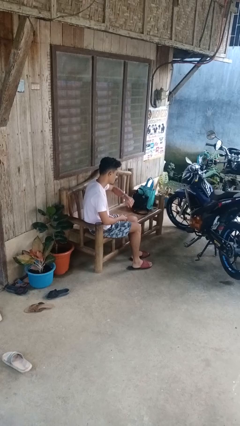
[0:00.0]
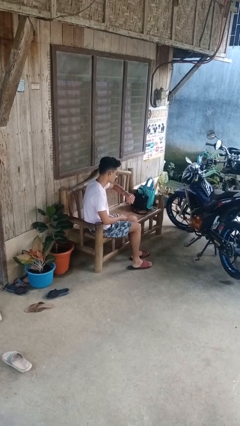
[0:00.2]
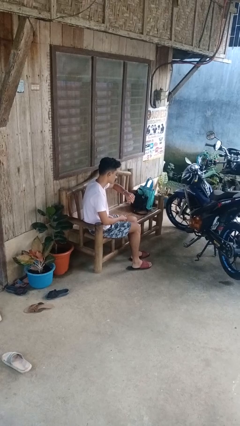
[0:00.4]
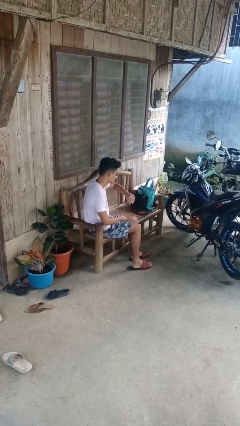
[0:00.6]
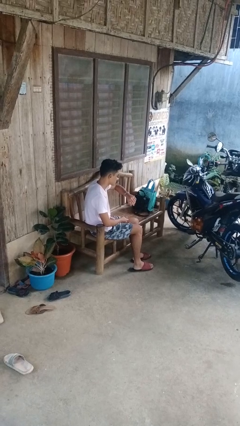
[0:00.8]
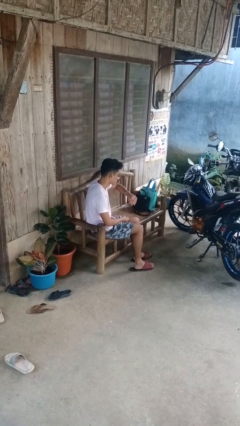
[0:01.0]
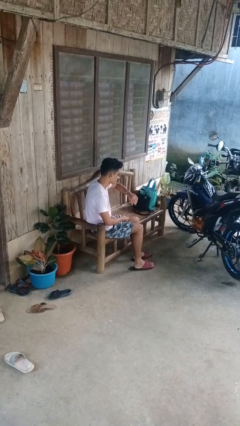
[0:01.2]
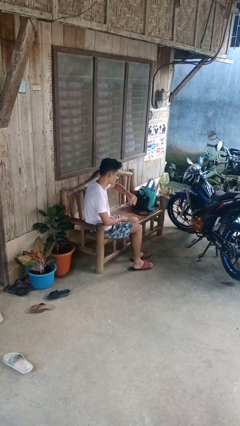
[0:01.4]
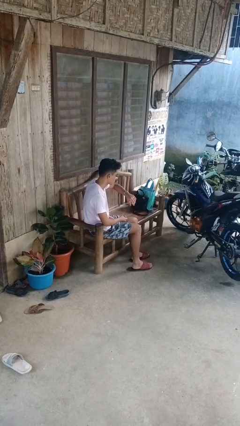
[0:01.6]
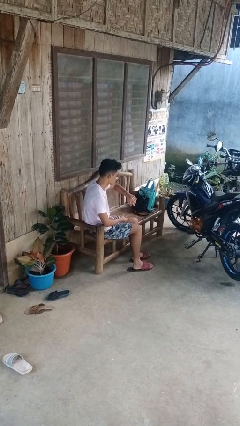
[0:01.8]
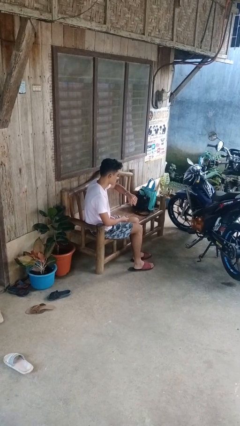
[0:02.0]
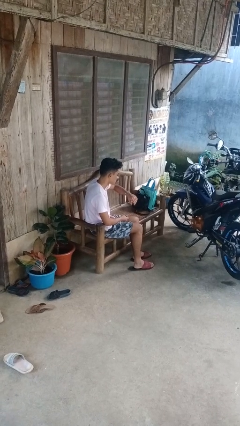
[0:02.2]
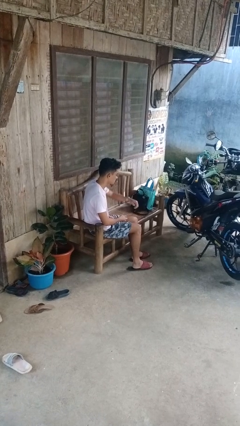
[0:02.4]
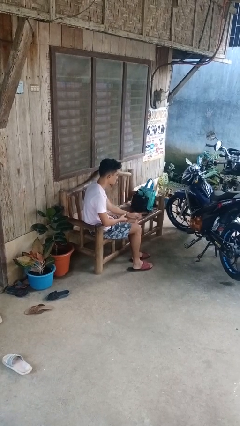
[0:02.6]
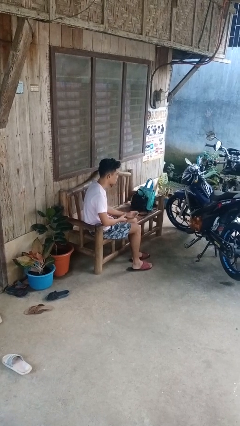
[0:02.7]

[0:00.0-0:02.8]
person looks at wristwatch

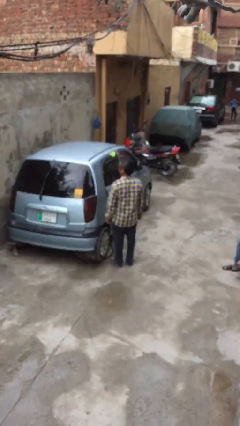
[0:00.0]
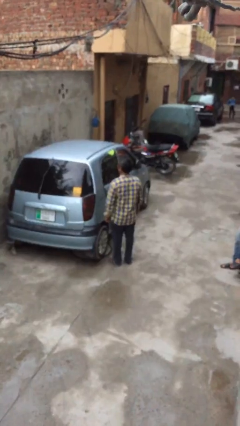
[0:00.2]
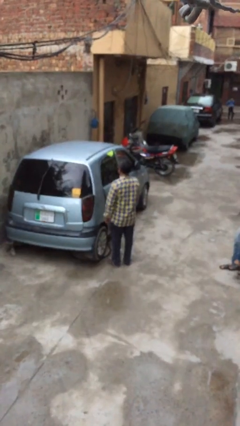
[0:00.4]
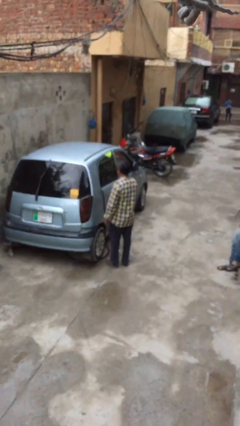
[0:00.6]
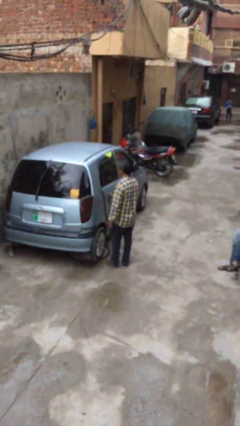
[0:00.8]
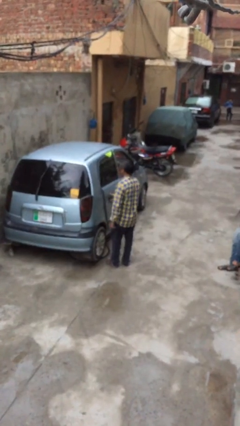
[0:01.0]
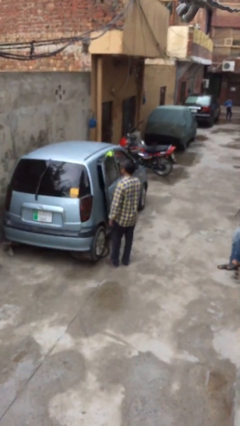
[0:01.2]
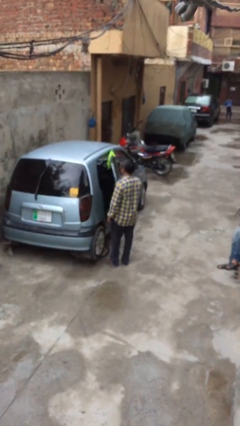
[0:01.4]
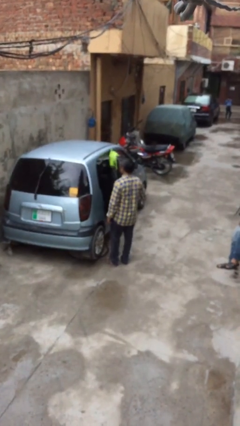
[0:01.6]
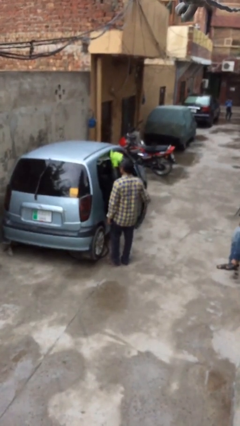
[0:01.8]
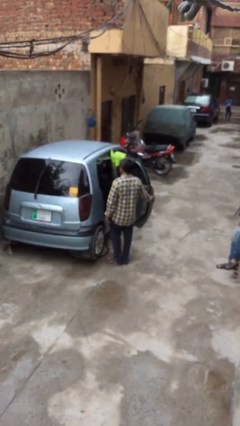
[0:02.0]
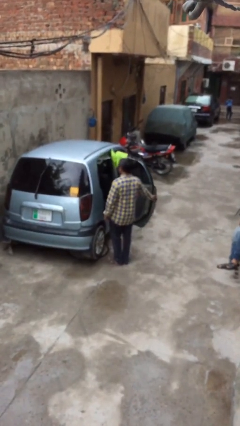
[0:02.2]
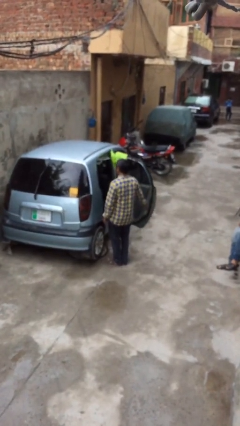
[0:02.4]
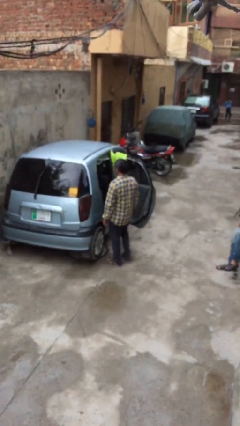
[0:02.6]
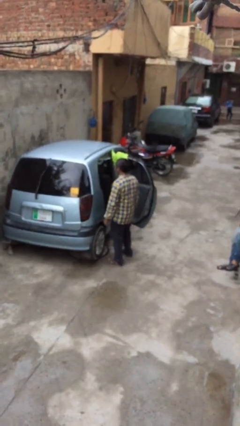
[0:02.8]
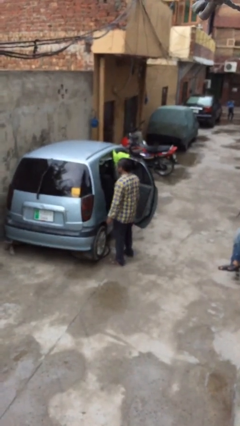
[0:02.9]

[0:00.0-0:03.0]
person opens car door

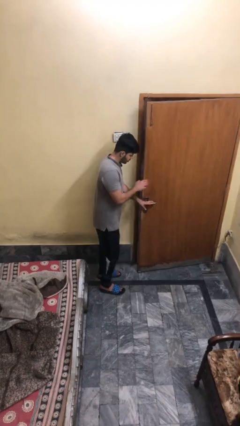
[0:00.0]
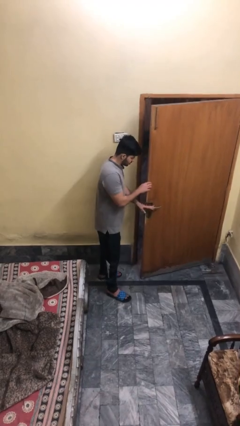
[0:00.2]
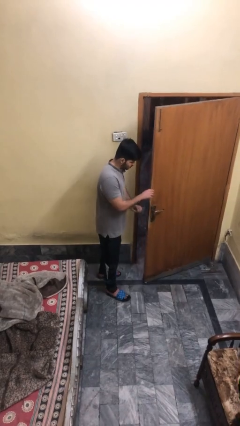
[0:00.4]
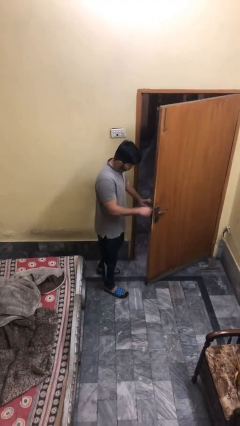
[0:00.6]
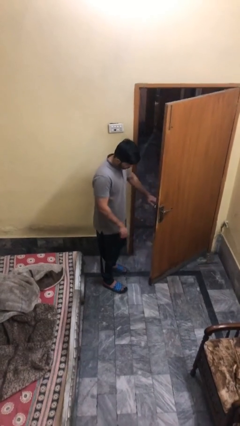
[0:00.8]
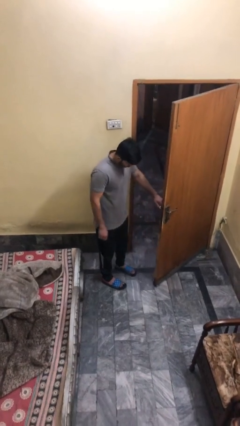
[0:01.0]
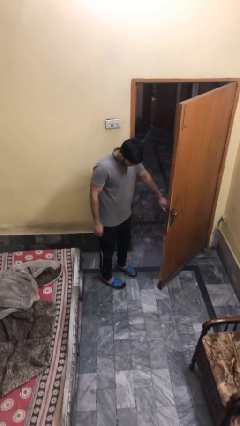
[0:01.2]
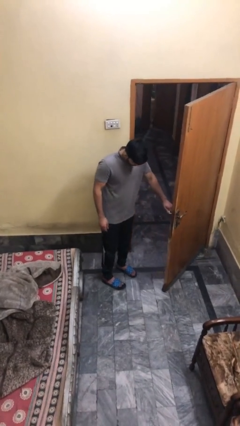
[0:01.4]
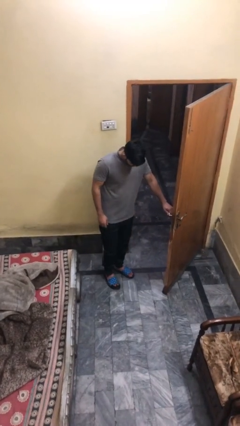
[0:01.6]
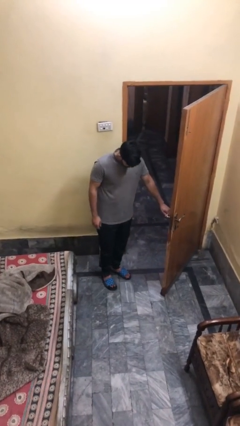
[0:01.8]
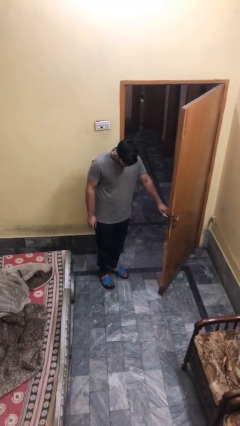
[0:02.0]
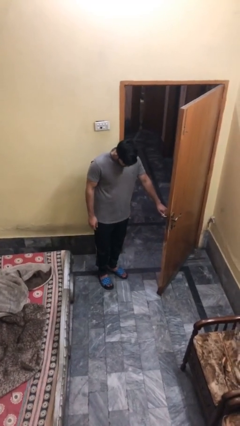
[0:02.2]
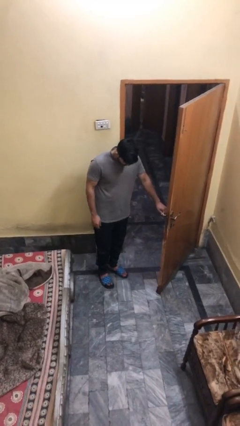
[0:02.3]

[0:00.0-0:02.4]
person opens facility door

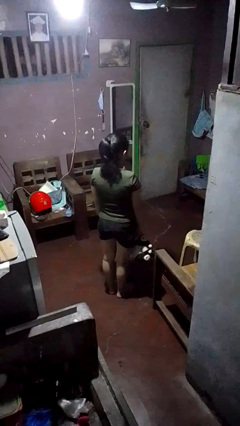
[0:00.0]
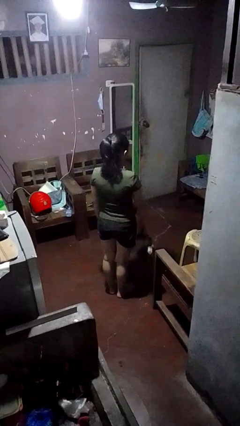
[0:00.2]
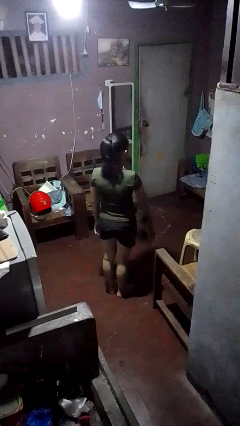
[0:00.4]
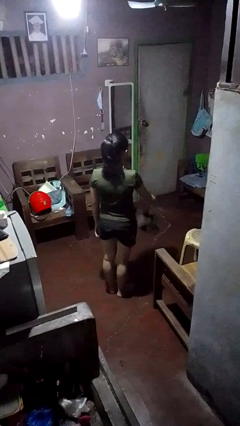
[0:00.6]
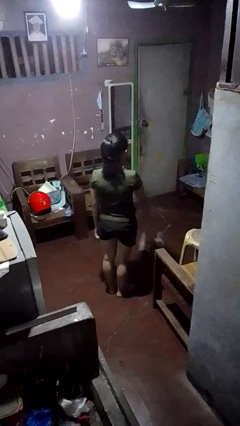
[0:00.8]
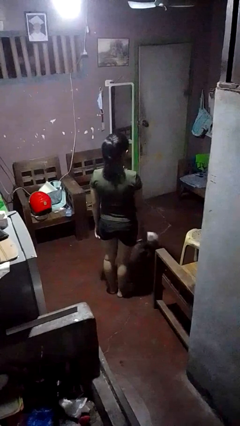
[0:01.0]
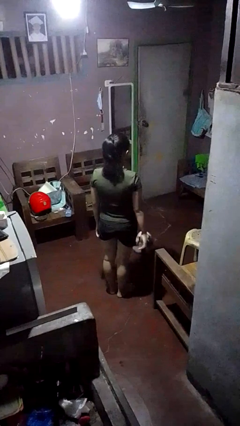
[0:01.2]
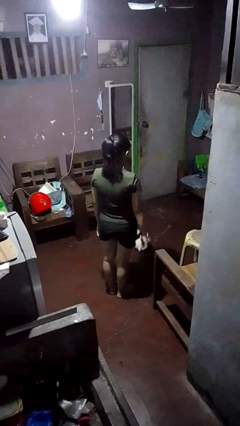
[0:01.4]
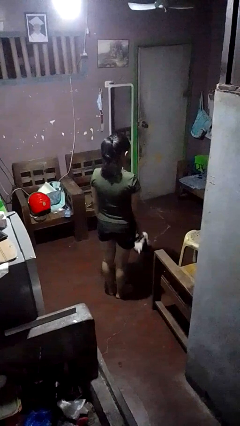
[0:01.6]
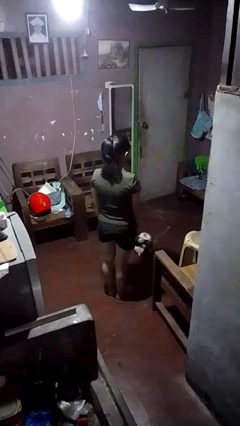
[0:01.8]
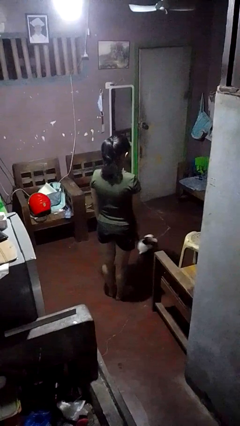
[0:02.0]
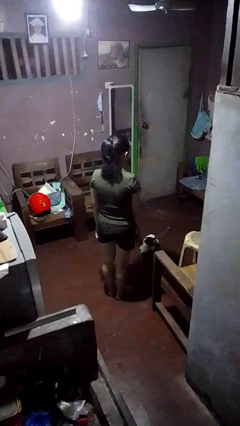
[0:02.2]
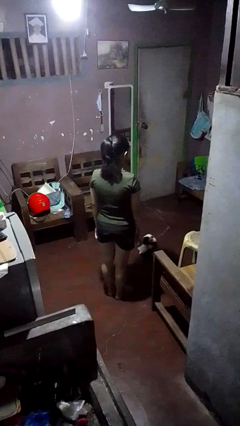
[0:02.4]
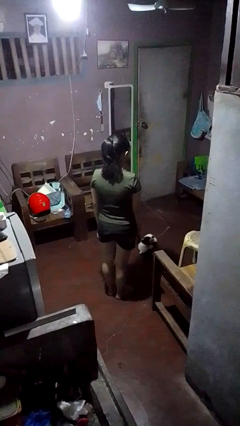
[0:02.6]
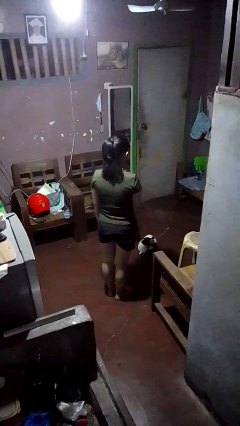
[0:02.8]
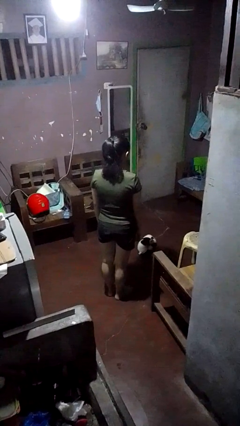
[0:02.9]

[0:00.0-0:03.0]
person throws object to ground

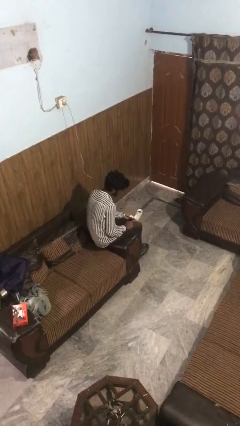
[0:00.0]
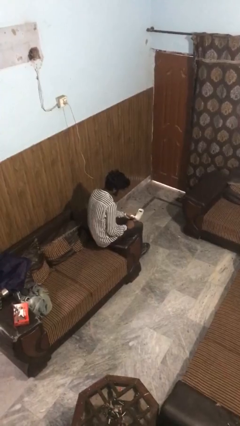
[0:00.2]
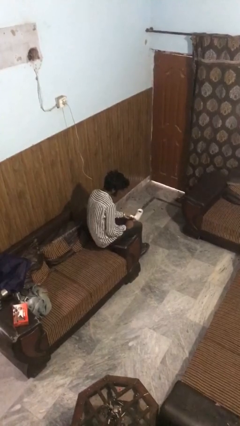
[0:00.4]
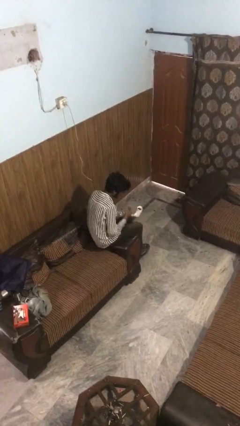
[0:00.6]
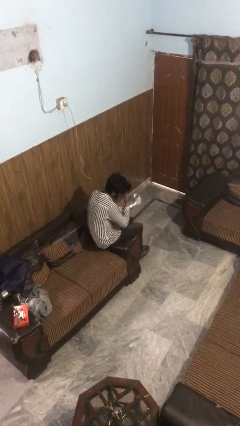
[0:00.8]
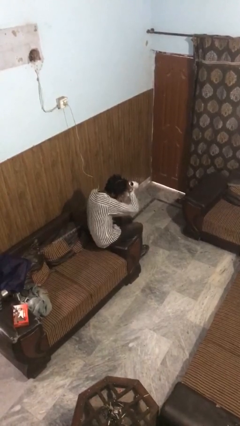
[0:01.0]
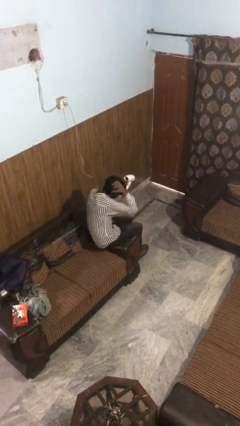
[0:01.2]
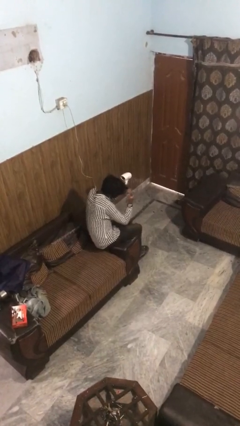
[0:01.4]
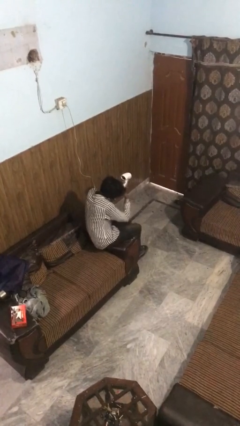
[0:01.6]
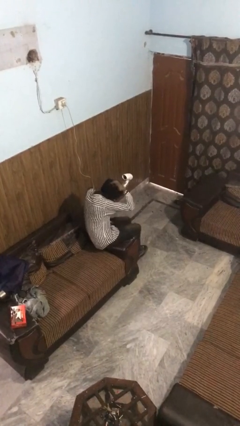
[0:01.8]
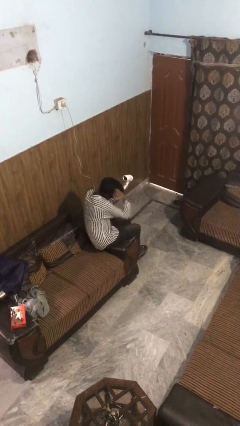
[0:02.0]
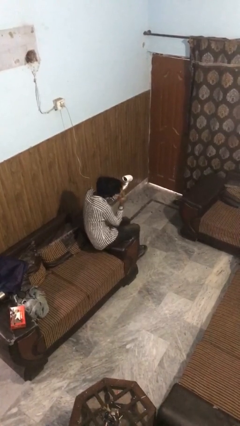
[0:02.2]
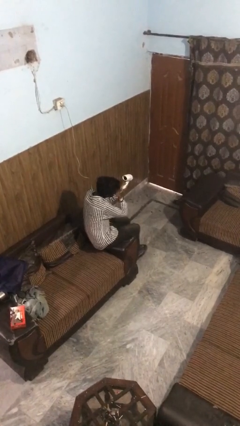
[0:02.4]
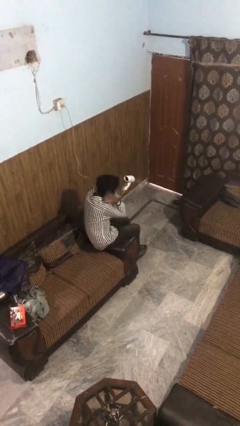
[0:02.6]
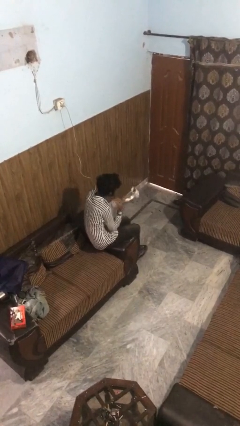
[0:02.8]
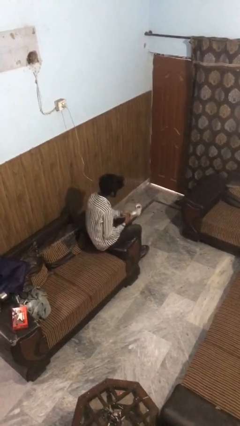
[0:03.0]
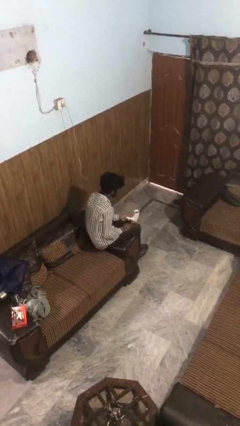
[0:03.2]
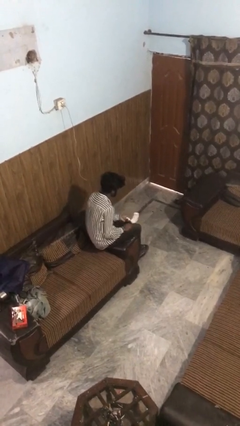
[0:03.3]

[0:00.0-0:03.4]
person dries hair with hairdryer

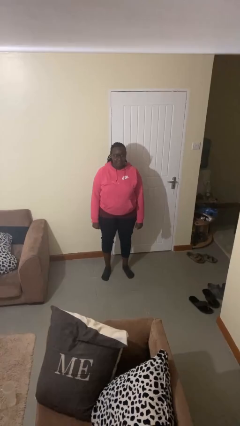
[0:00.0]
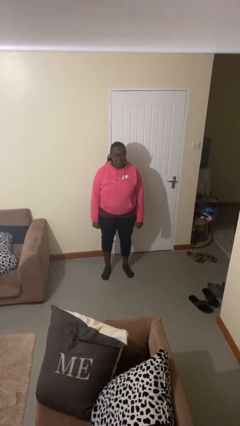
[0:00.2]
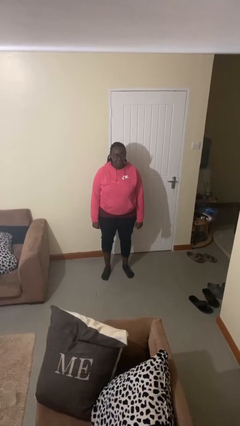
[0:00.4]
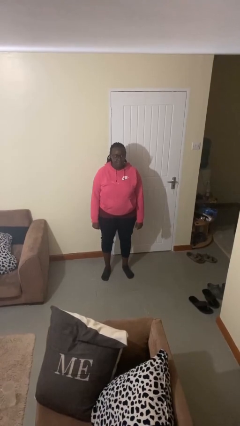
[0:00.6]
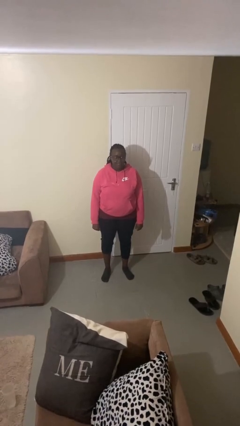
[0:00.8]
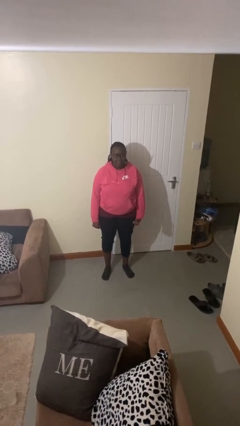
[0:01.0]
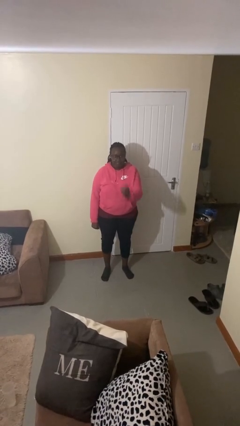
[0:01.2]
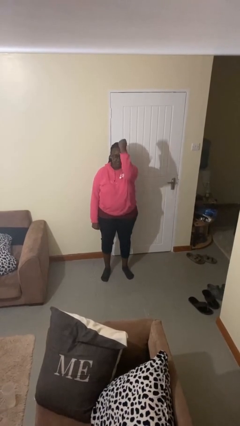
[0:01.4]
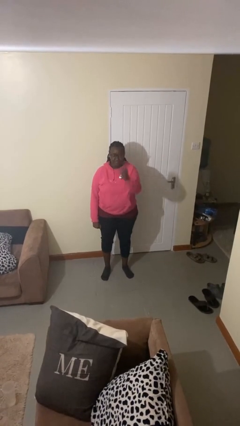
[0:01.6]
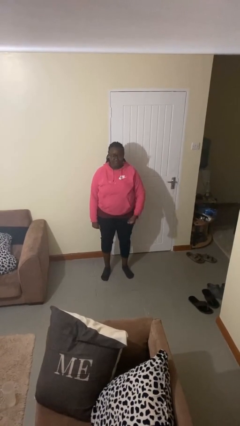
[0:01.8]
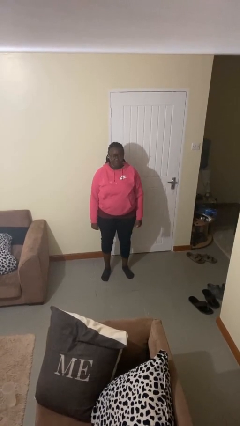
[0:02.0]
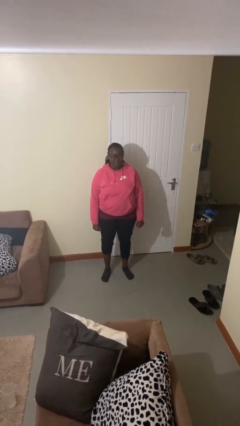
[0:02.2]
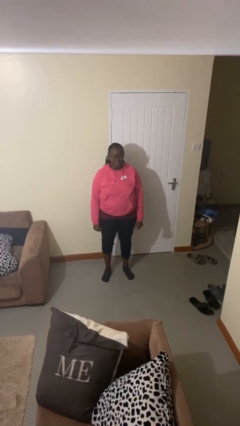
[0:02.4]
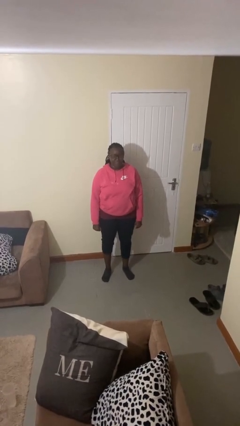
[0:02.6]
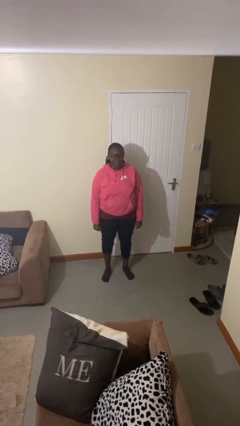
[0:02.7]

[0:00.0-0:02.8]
person punches
